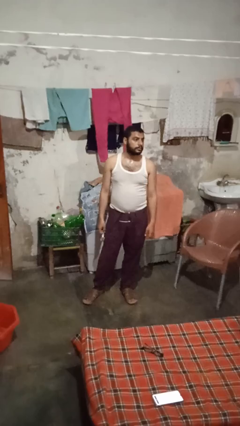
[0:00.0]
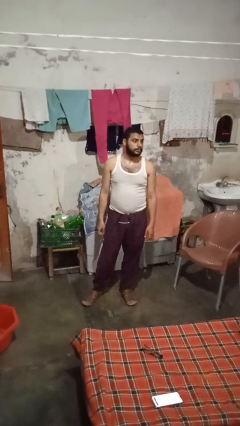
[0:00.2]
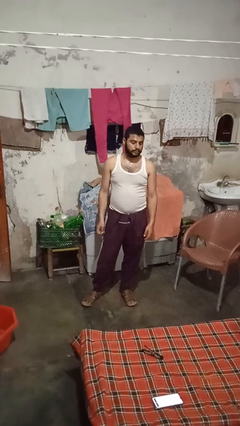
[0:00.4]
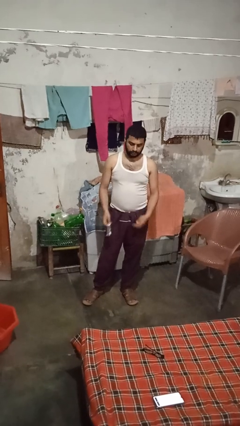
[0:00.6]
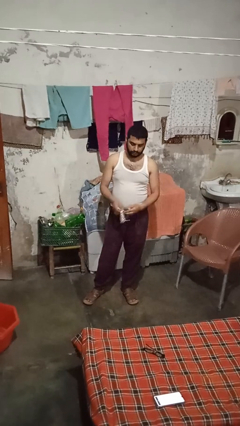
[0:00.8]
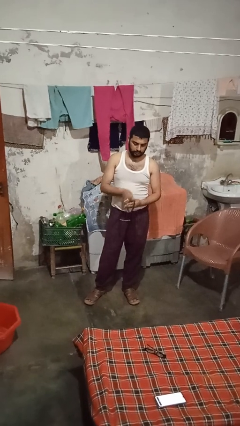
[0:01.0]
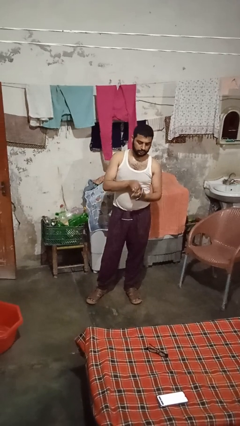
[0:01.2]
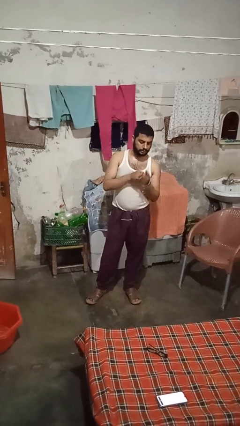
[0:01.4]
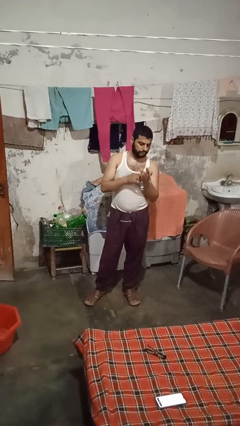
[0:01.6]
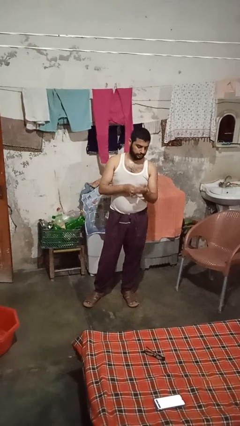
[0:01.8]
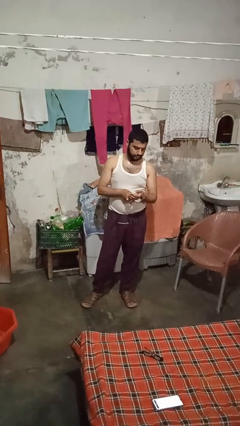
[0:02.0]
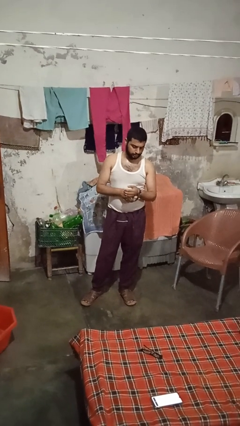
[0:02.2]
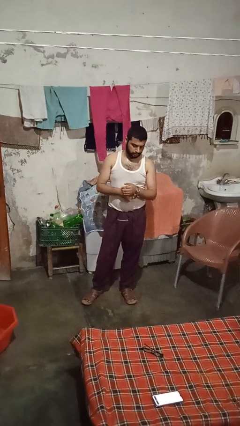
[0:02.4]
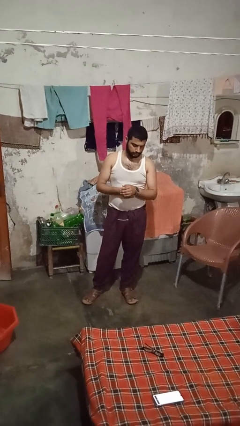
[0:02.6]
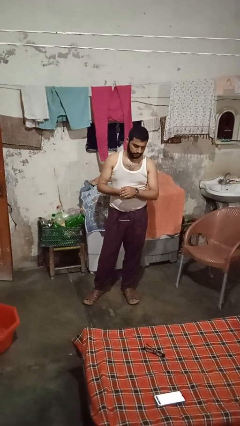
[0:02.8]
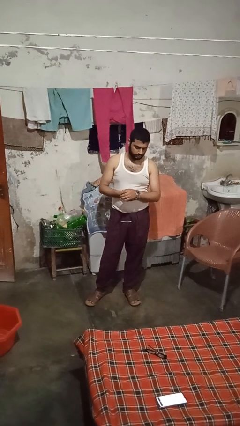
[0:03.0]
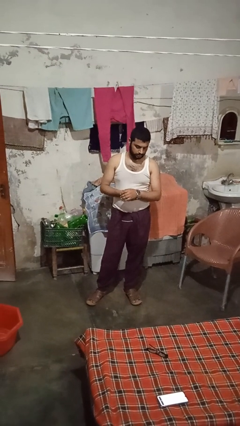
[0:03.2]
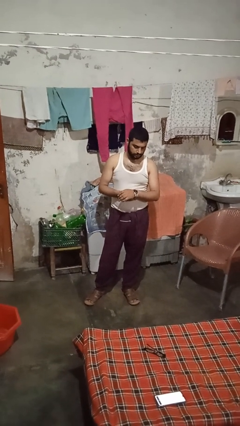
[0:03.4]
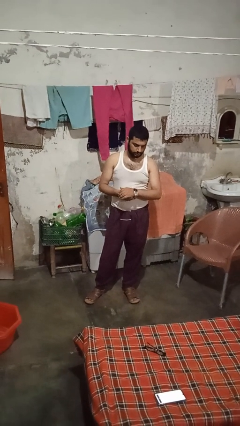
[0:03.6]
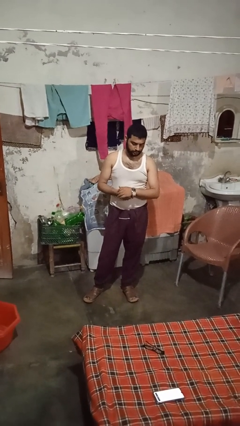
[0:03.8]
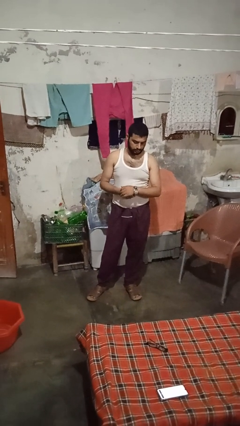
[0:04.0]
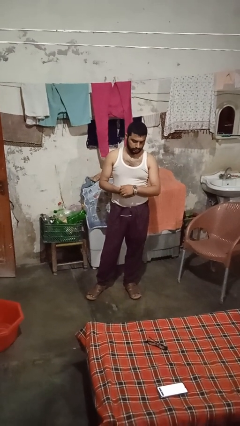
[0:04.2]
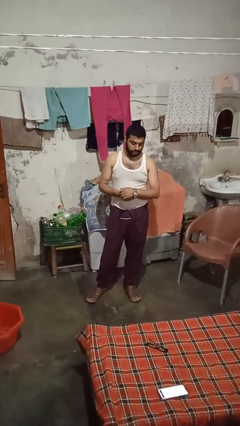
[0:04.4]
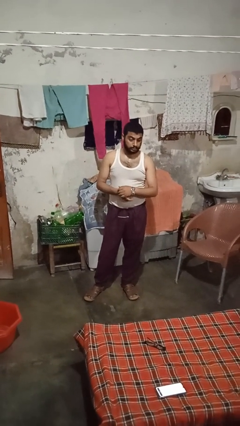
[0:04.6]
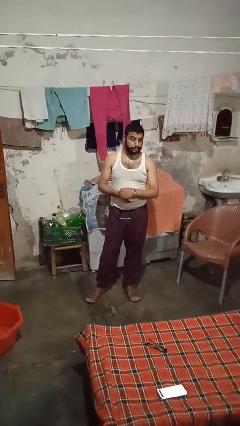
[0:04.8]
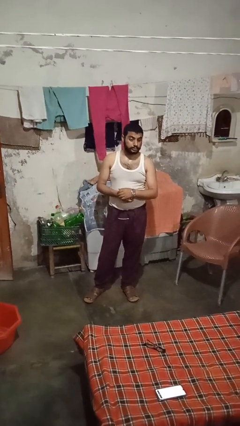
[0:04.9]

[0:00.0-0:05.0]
person puts on wristwatch

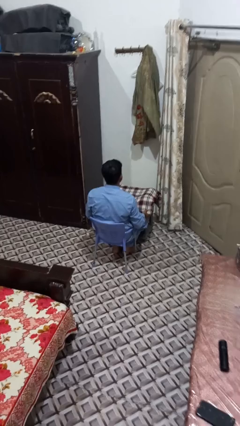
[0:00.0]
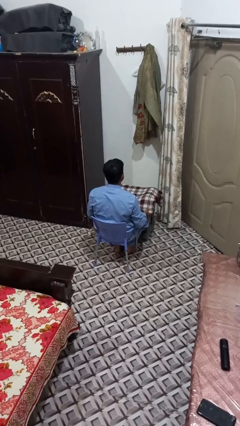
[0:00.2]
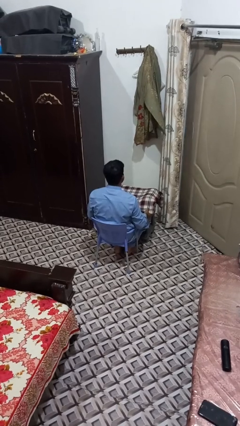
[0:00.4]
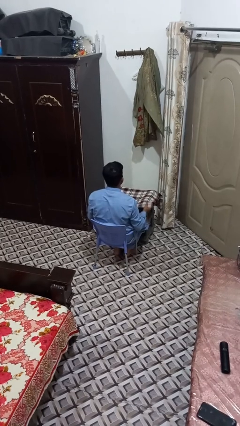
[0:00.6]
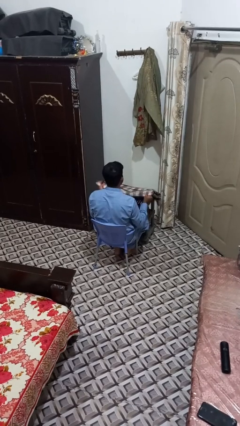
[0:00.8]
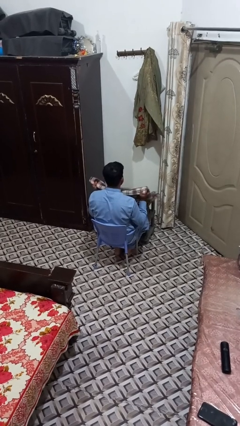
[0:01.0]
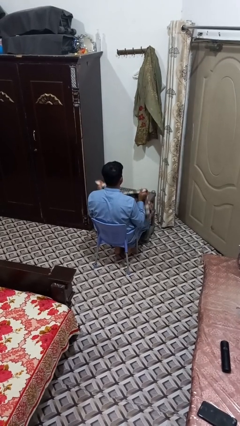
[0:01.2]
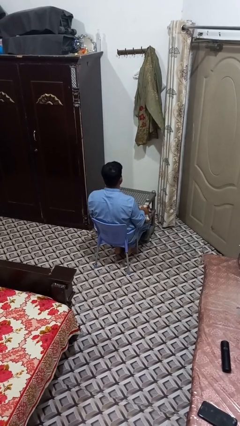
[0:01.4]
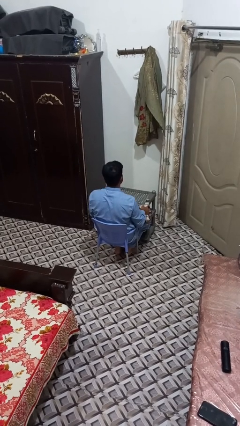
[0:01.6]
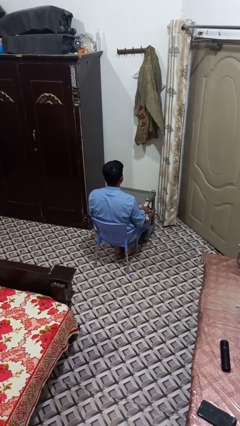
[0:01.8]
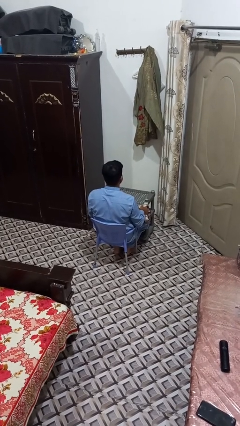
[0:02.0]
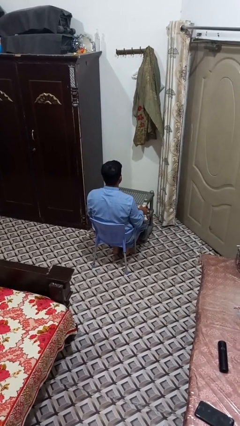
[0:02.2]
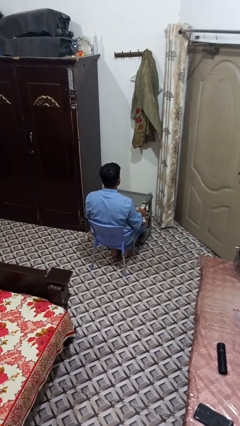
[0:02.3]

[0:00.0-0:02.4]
person folds tablecloth

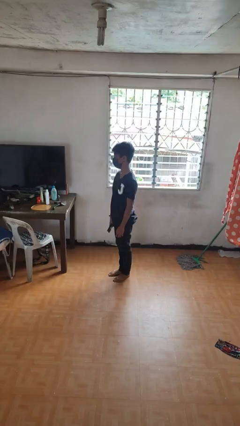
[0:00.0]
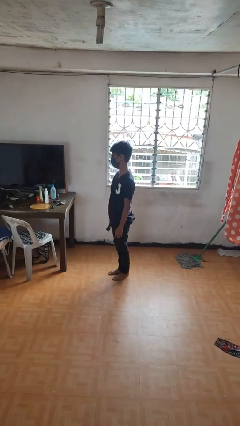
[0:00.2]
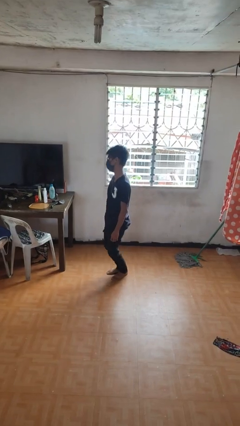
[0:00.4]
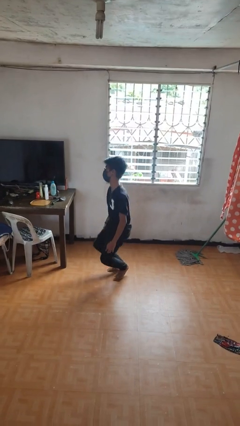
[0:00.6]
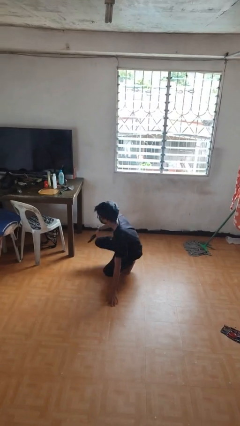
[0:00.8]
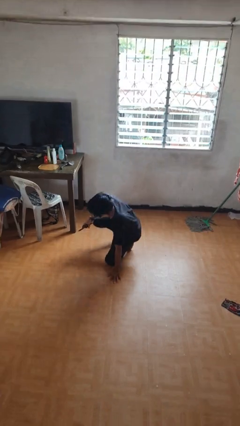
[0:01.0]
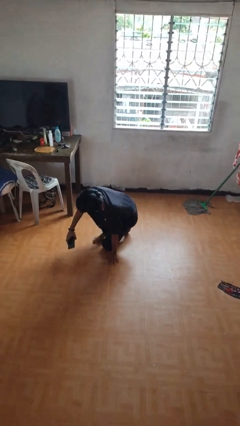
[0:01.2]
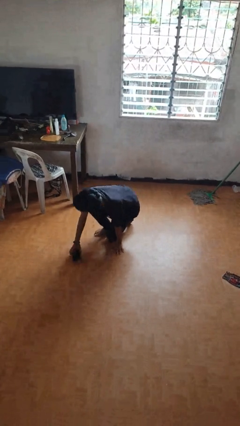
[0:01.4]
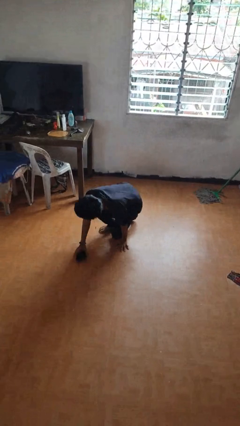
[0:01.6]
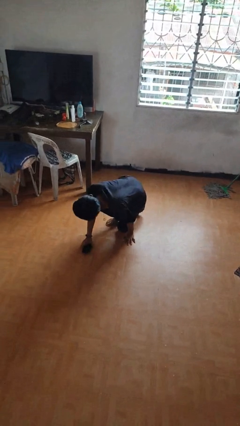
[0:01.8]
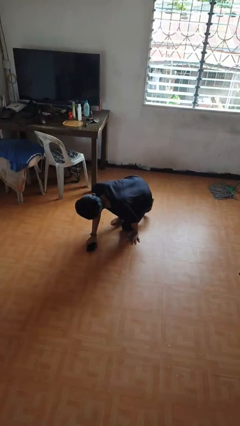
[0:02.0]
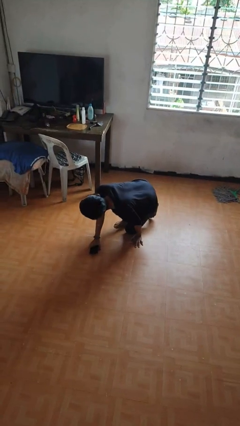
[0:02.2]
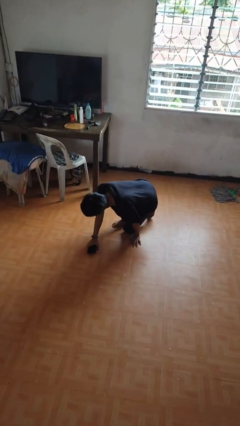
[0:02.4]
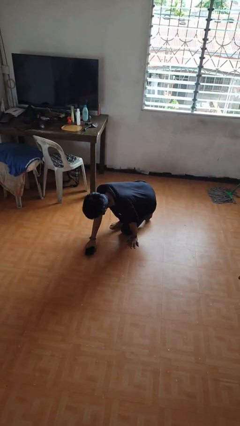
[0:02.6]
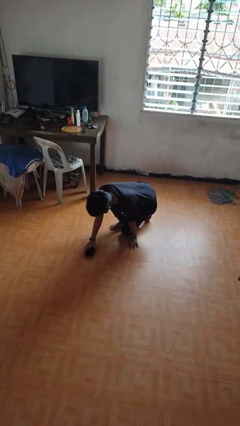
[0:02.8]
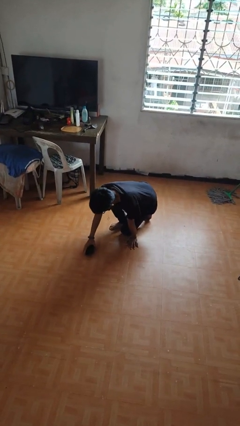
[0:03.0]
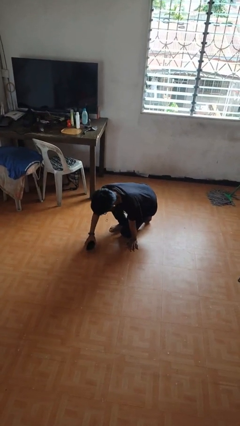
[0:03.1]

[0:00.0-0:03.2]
person falls while standing

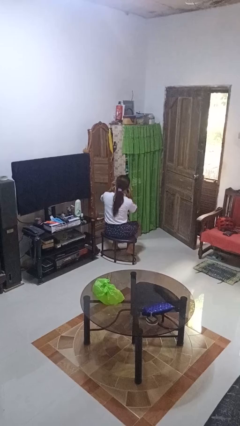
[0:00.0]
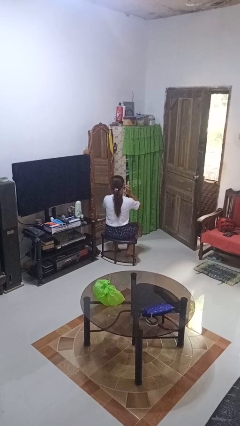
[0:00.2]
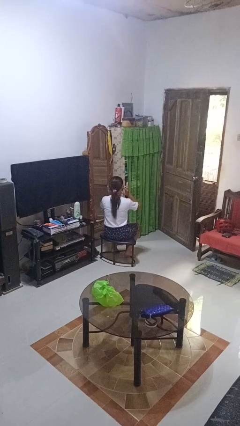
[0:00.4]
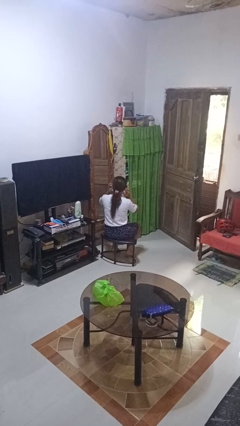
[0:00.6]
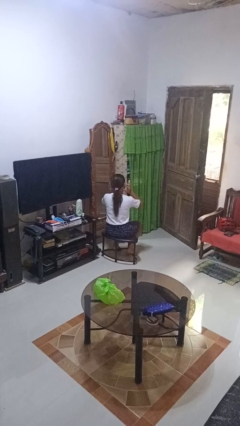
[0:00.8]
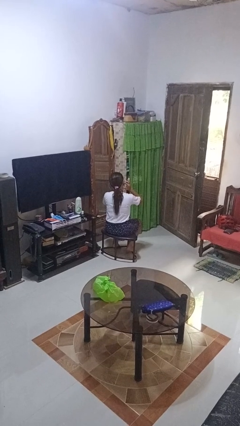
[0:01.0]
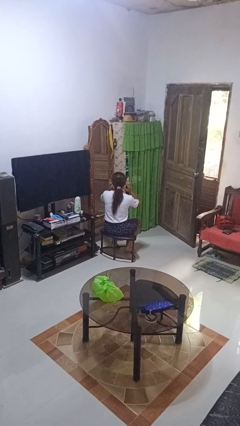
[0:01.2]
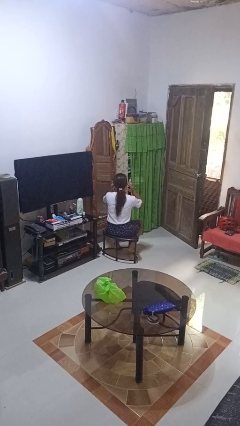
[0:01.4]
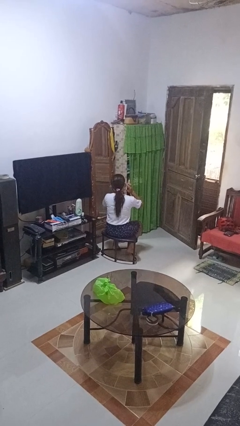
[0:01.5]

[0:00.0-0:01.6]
person puts fingers in ear

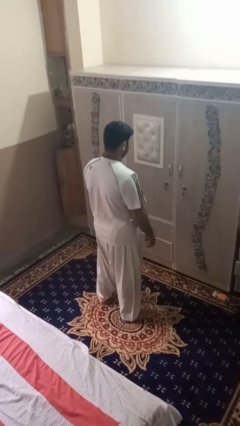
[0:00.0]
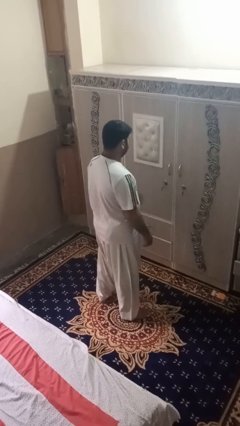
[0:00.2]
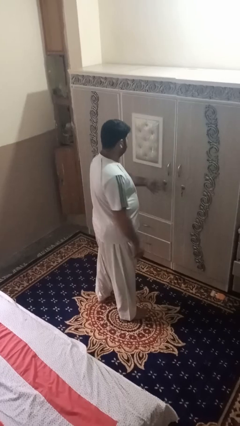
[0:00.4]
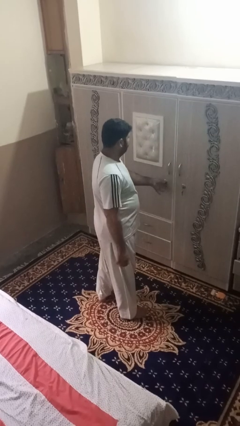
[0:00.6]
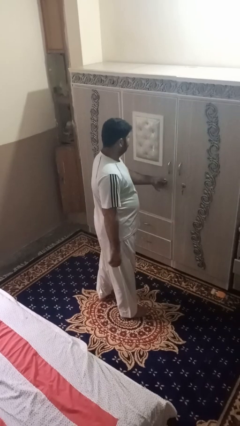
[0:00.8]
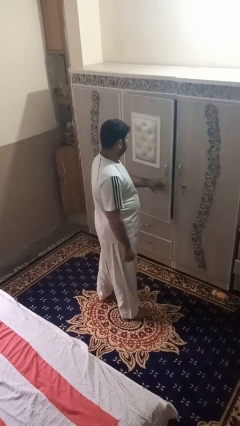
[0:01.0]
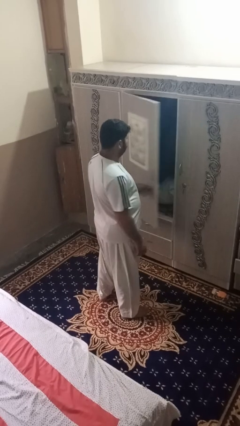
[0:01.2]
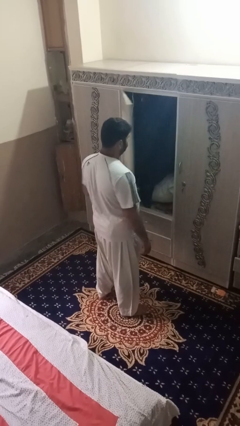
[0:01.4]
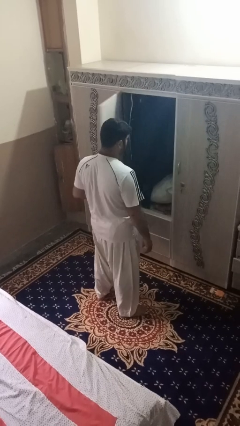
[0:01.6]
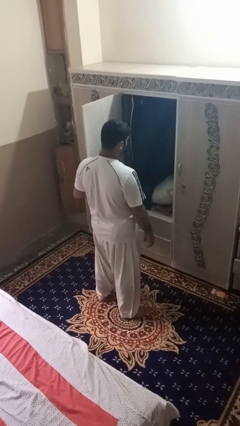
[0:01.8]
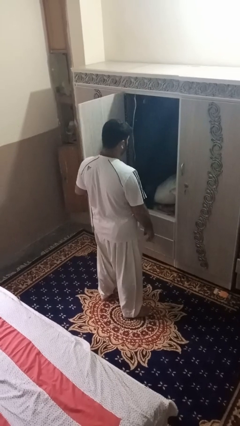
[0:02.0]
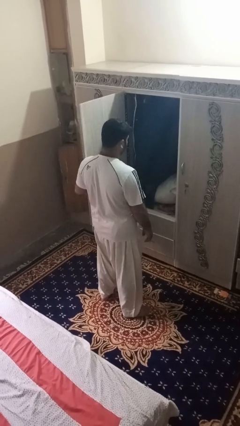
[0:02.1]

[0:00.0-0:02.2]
person opens dresser drawer

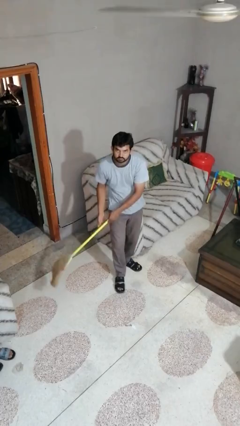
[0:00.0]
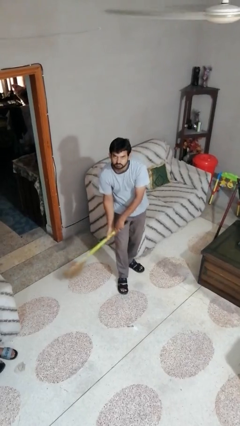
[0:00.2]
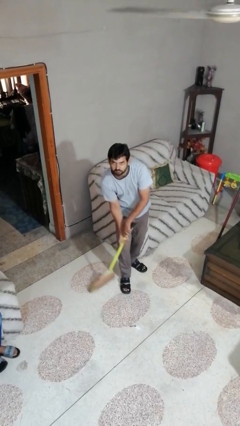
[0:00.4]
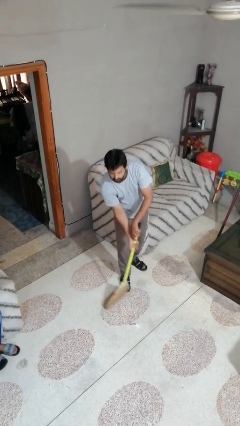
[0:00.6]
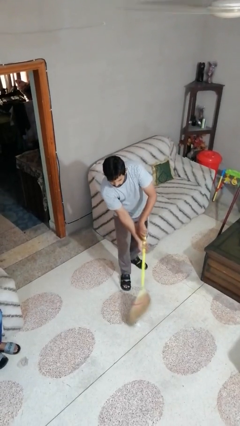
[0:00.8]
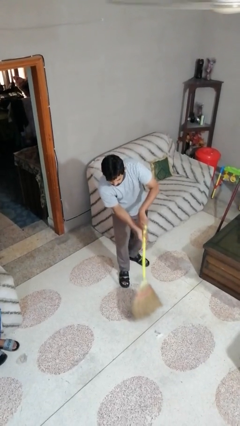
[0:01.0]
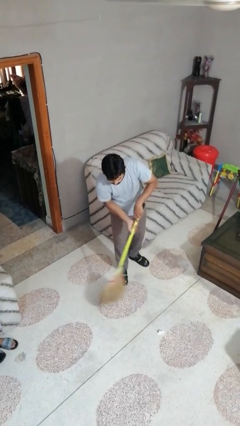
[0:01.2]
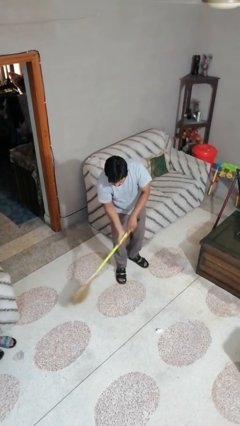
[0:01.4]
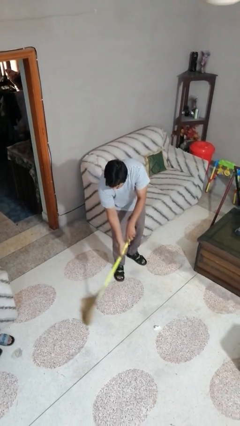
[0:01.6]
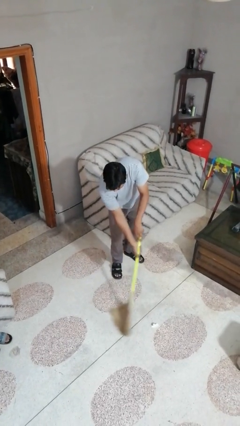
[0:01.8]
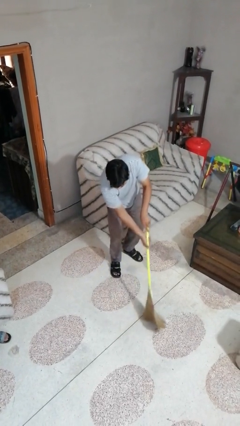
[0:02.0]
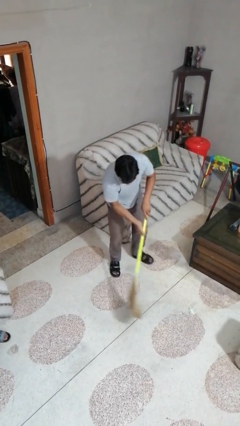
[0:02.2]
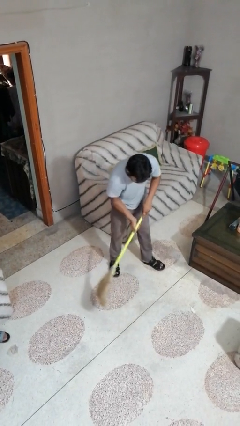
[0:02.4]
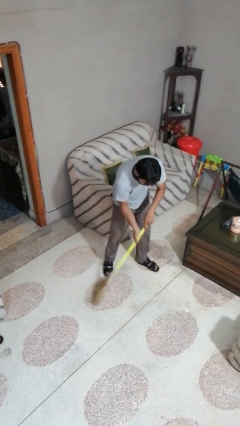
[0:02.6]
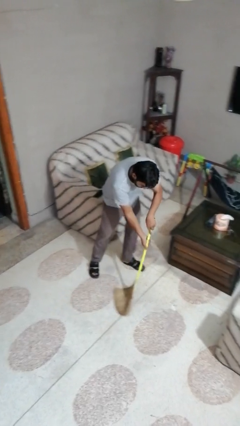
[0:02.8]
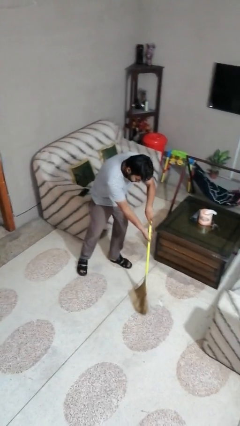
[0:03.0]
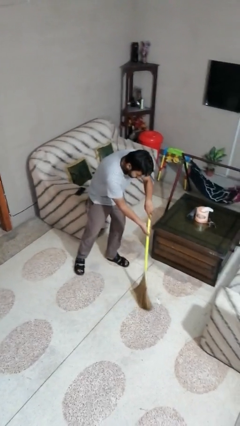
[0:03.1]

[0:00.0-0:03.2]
person sweeps floor
